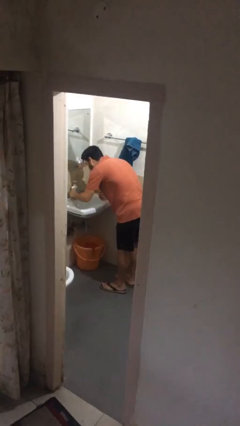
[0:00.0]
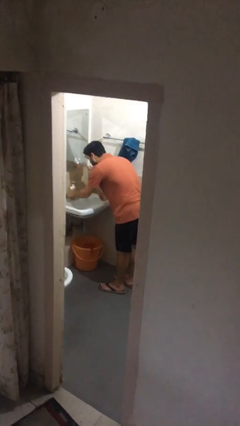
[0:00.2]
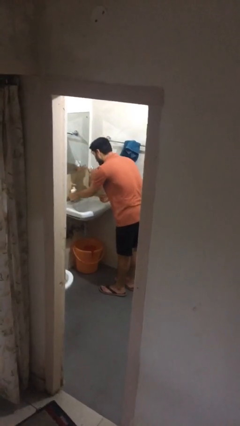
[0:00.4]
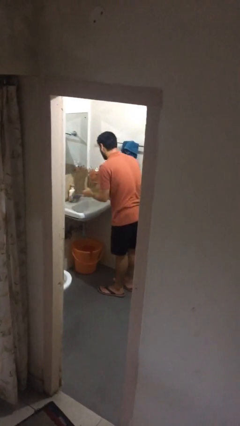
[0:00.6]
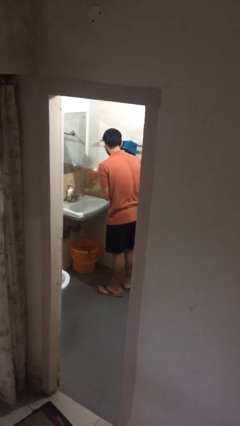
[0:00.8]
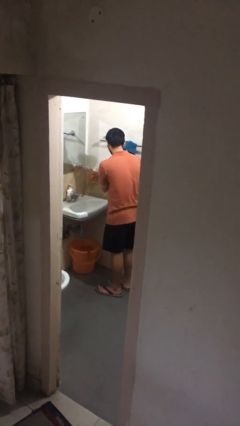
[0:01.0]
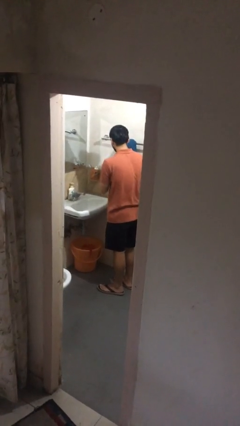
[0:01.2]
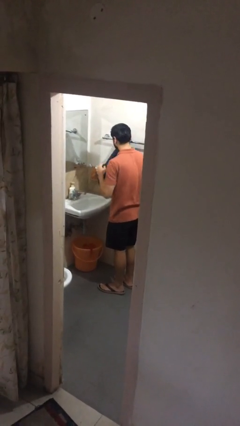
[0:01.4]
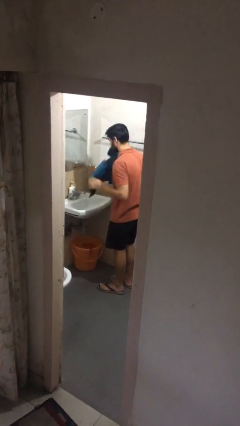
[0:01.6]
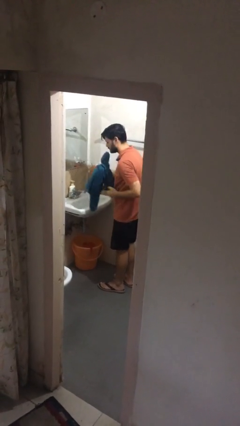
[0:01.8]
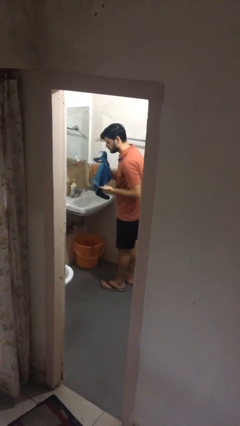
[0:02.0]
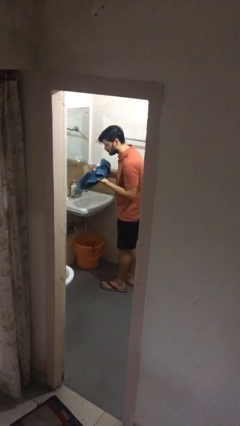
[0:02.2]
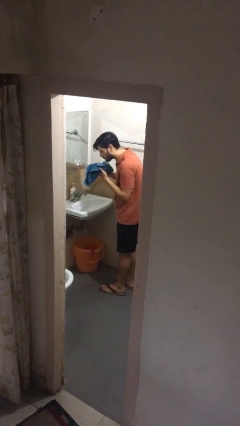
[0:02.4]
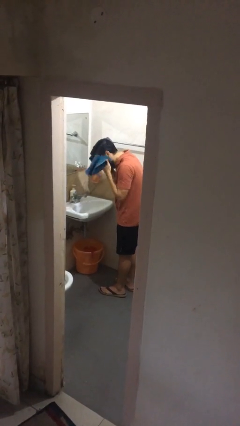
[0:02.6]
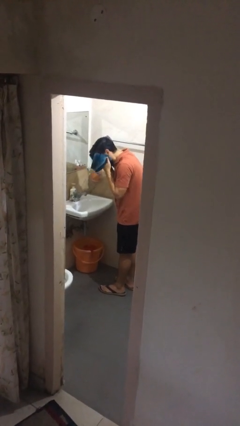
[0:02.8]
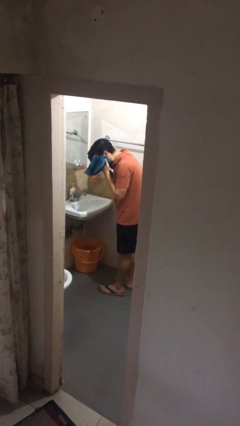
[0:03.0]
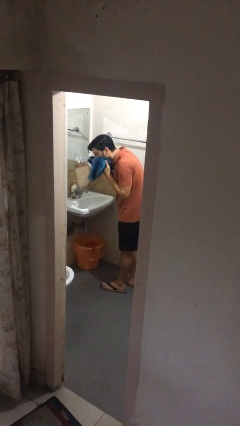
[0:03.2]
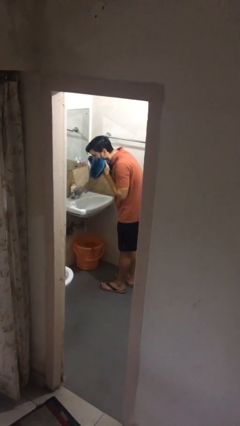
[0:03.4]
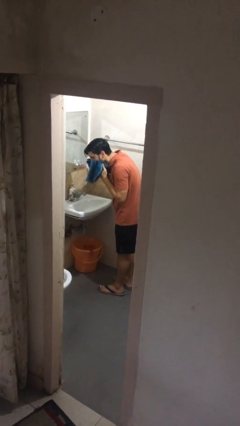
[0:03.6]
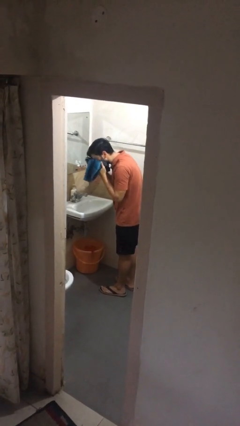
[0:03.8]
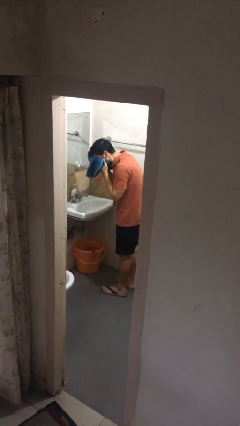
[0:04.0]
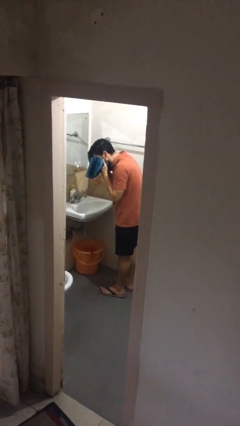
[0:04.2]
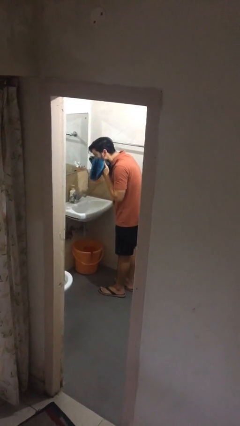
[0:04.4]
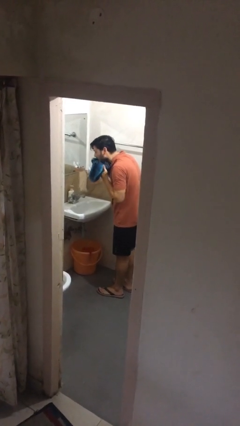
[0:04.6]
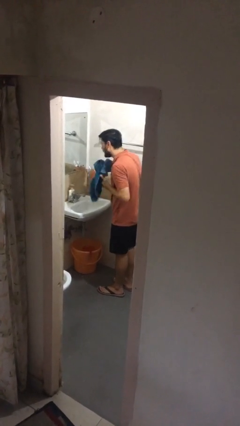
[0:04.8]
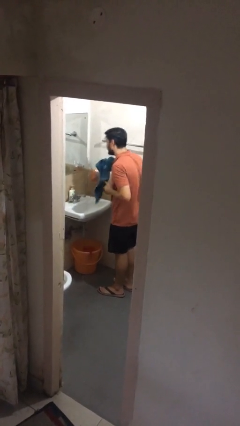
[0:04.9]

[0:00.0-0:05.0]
person dries face with towel

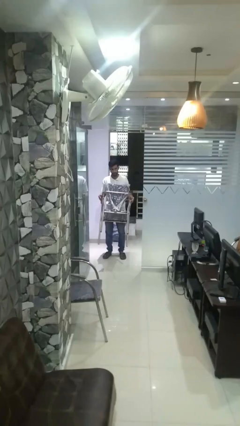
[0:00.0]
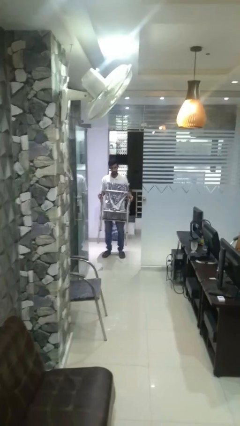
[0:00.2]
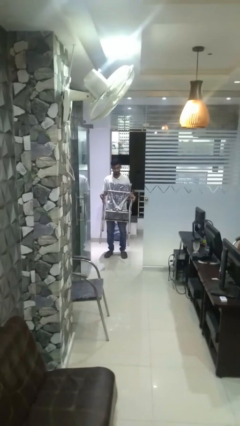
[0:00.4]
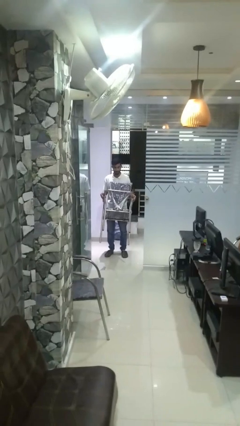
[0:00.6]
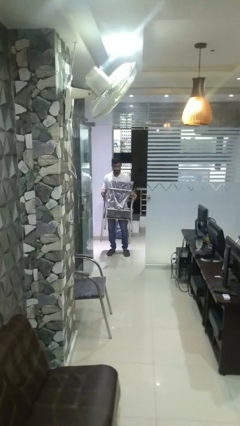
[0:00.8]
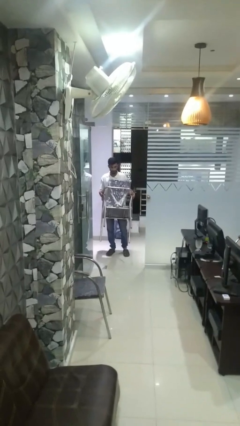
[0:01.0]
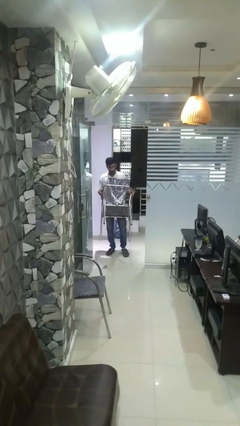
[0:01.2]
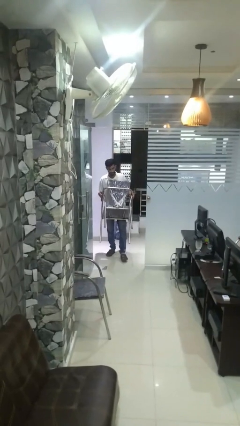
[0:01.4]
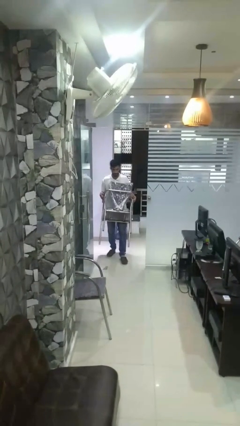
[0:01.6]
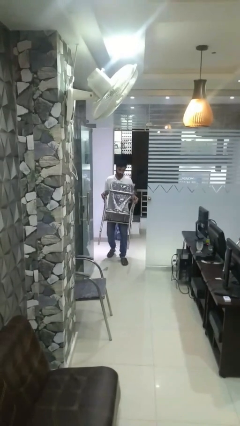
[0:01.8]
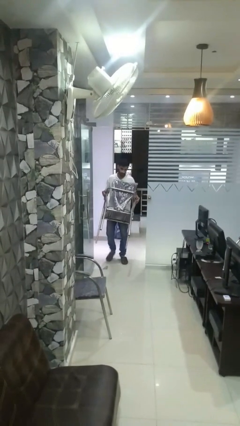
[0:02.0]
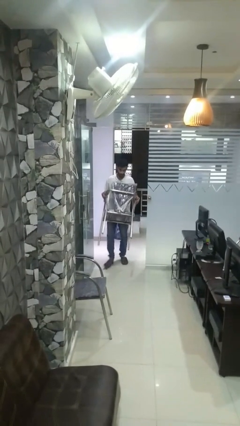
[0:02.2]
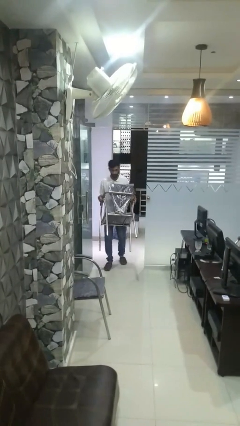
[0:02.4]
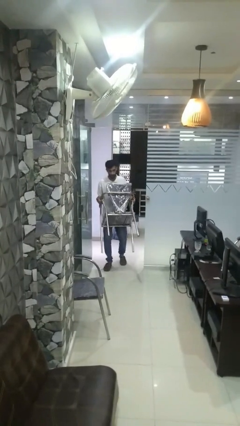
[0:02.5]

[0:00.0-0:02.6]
person carries furniture

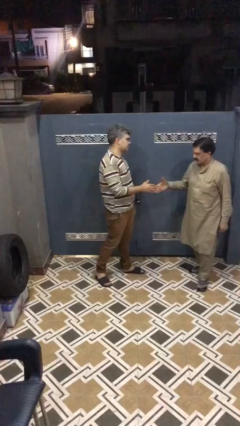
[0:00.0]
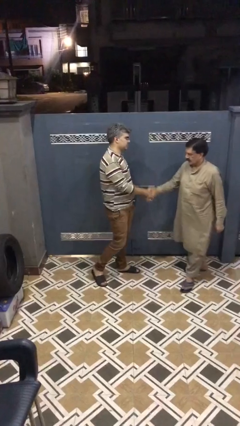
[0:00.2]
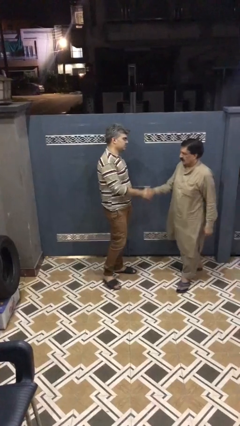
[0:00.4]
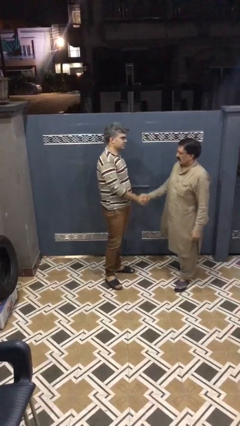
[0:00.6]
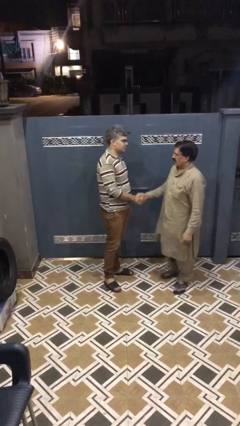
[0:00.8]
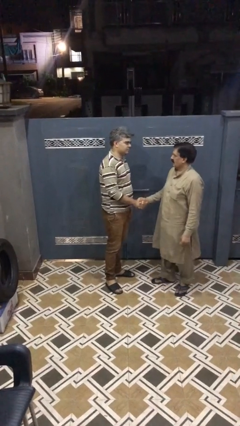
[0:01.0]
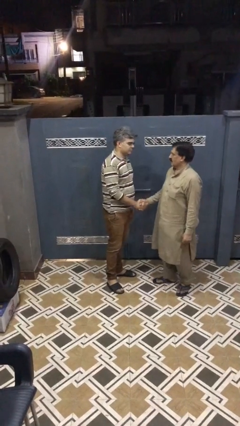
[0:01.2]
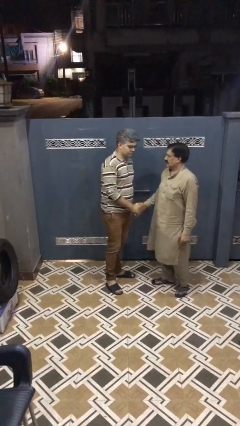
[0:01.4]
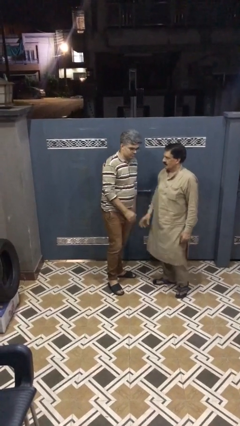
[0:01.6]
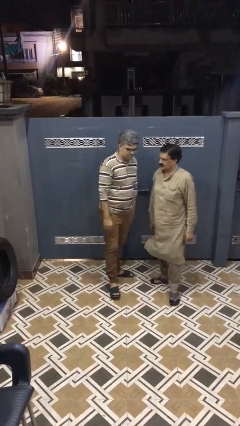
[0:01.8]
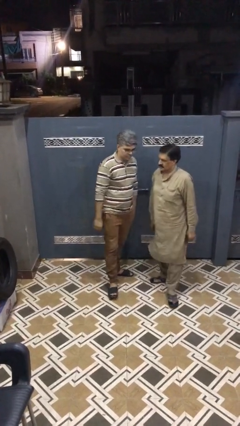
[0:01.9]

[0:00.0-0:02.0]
person shakes hand

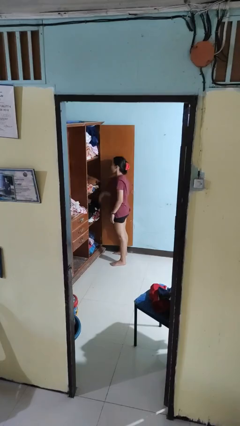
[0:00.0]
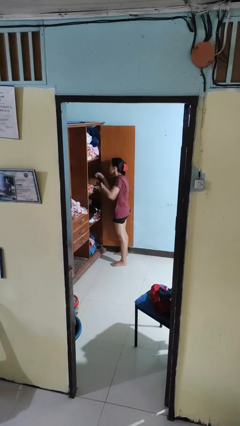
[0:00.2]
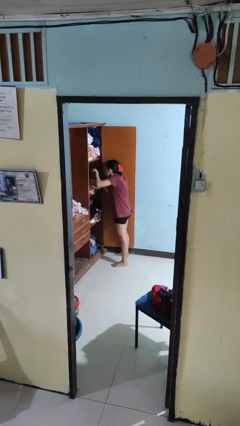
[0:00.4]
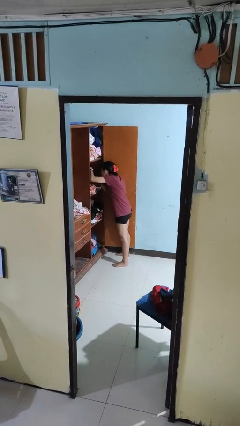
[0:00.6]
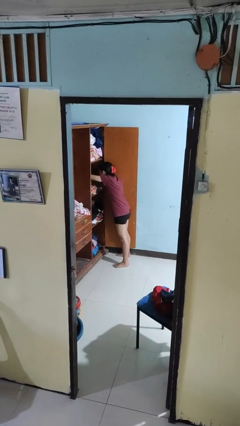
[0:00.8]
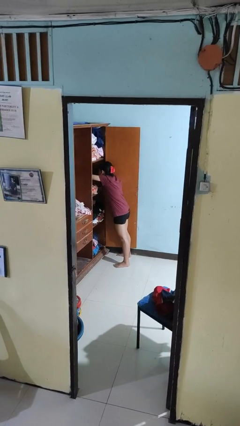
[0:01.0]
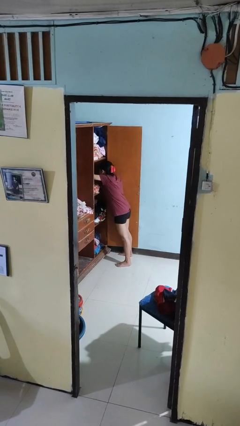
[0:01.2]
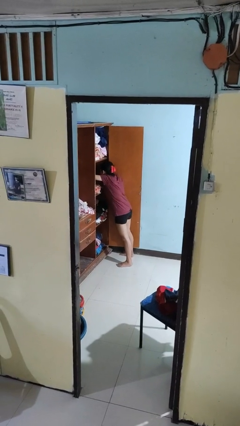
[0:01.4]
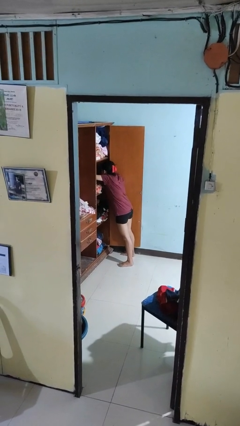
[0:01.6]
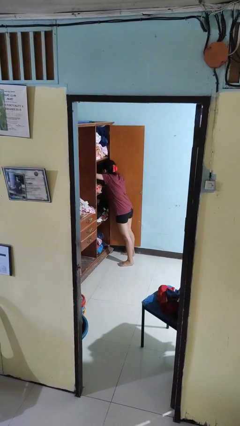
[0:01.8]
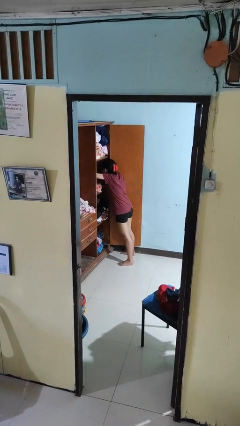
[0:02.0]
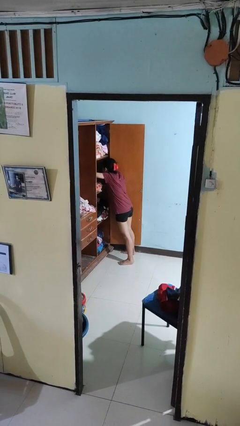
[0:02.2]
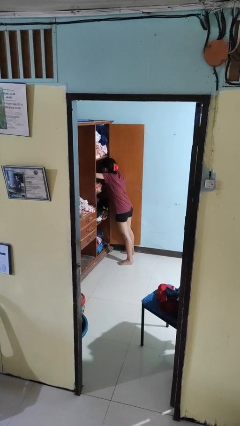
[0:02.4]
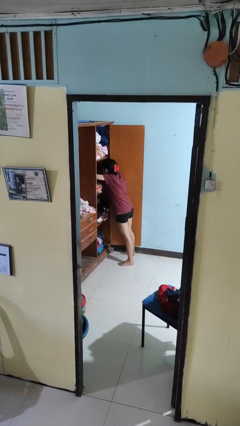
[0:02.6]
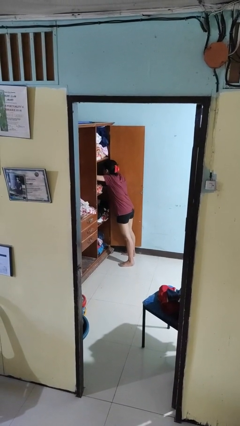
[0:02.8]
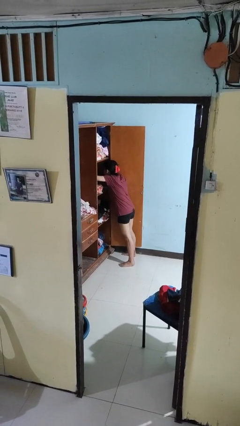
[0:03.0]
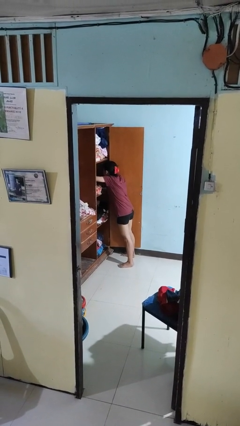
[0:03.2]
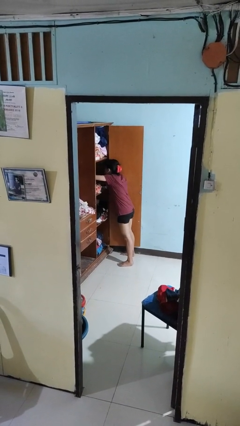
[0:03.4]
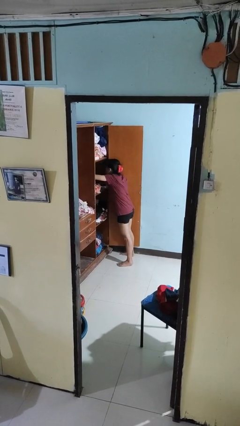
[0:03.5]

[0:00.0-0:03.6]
person searches in cabinet

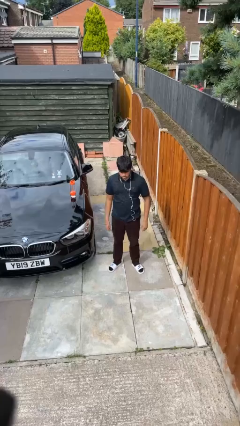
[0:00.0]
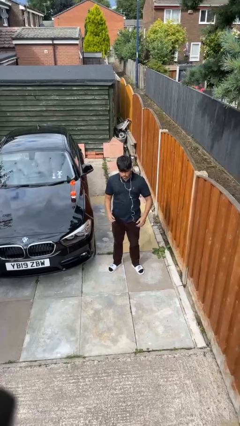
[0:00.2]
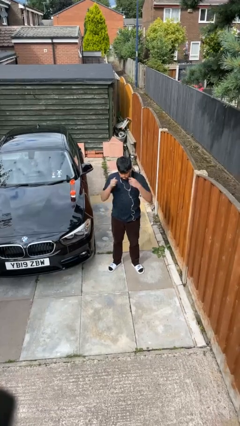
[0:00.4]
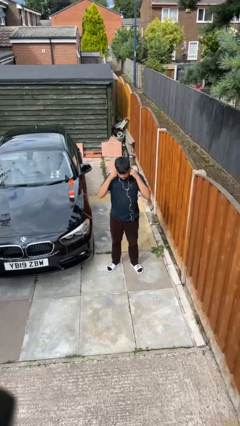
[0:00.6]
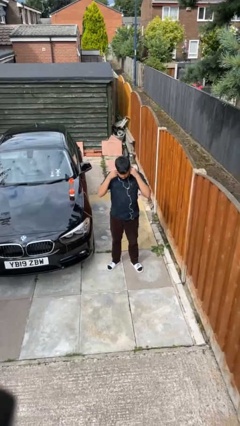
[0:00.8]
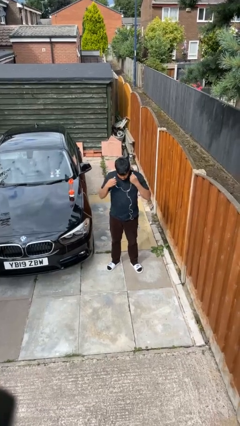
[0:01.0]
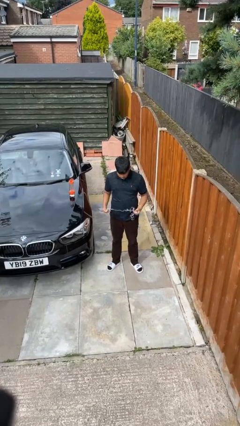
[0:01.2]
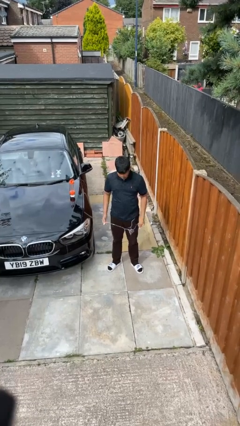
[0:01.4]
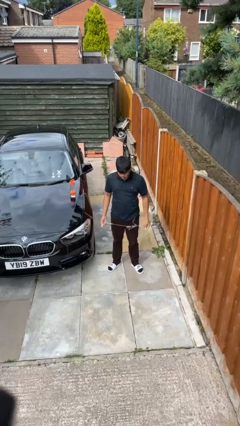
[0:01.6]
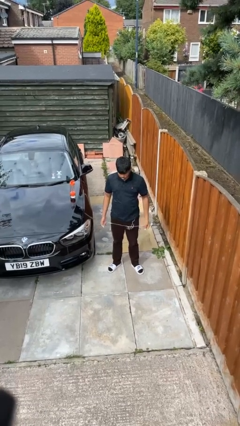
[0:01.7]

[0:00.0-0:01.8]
person takes off headphones

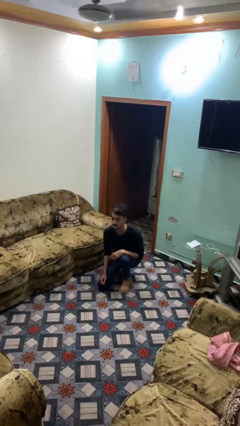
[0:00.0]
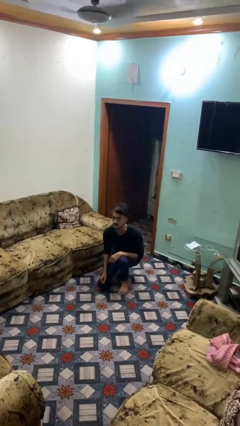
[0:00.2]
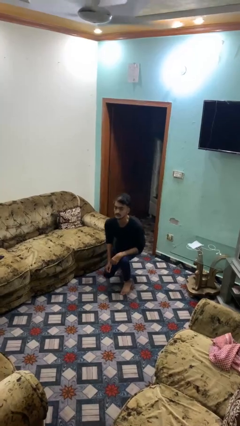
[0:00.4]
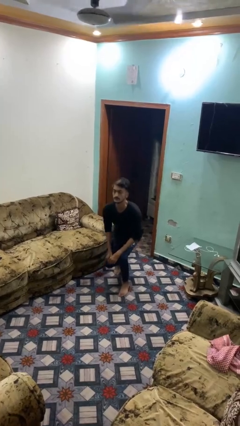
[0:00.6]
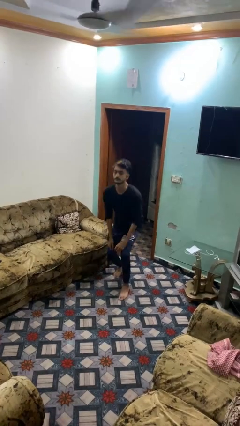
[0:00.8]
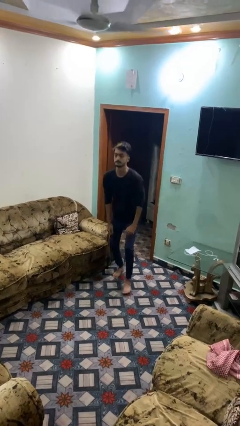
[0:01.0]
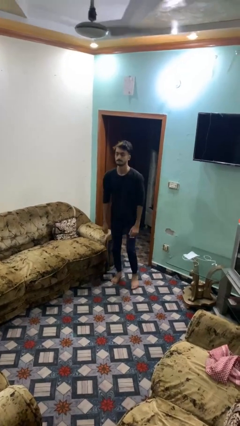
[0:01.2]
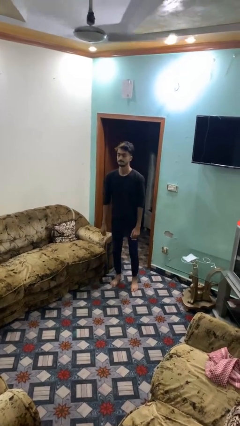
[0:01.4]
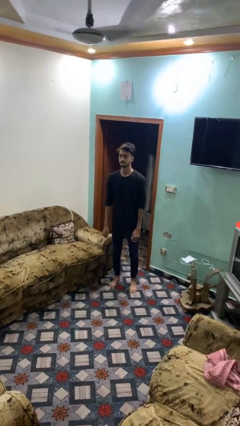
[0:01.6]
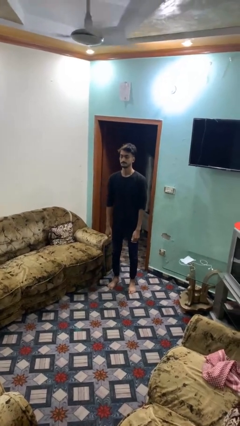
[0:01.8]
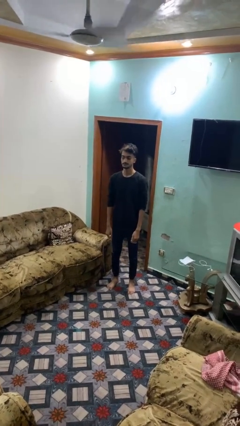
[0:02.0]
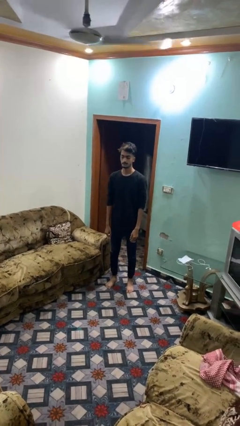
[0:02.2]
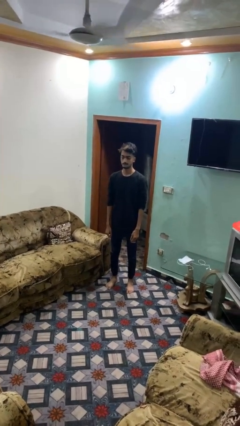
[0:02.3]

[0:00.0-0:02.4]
person stands up from floor
